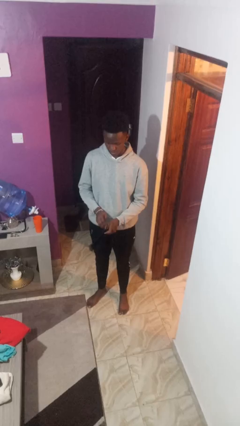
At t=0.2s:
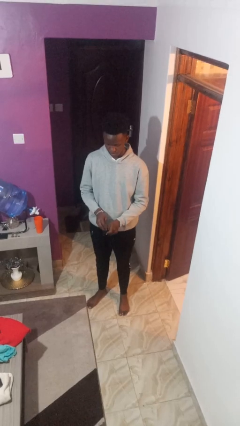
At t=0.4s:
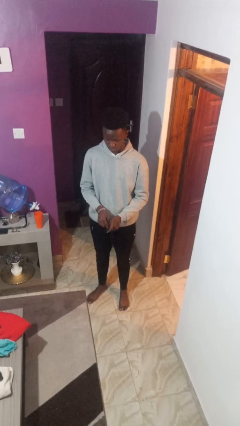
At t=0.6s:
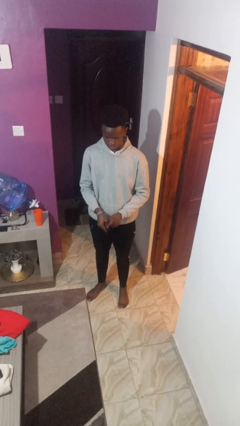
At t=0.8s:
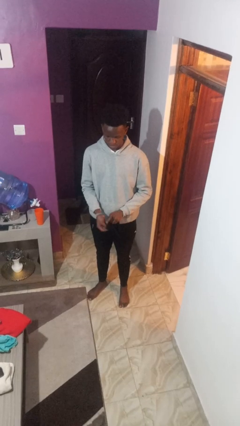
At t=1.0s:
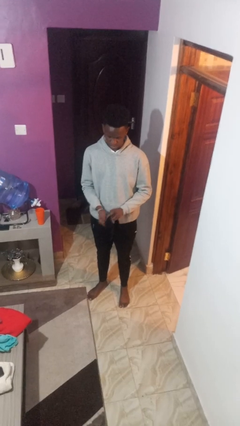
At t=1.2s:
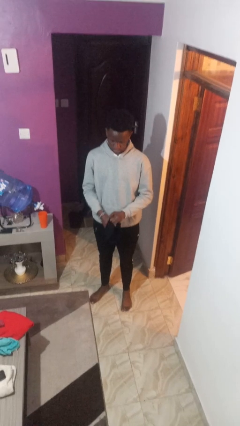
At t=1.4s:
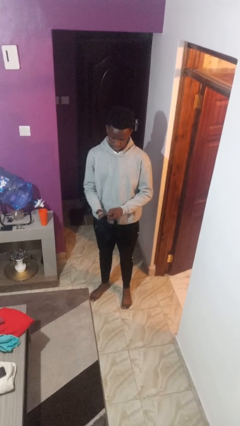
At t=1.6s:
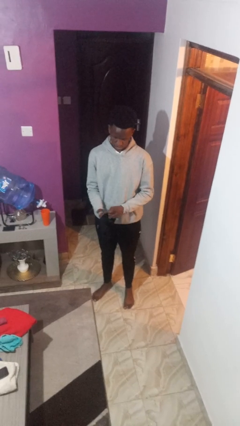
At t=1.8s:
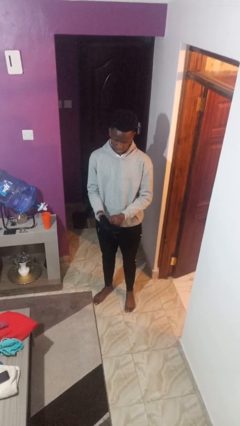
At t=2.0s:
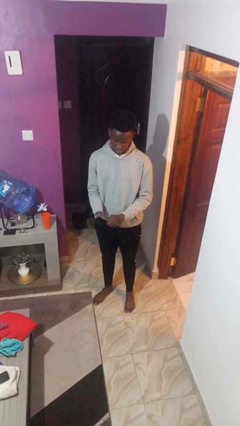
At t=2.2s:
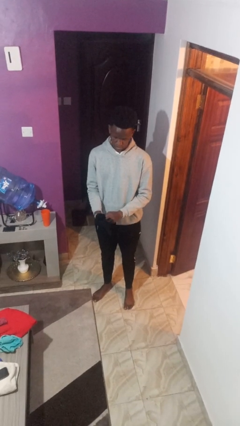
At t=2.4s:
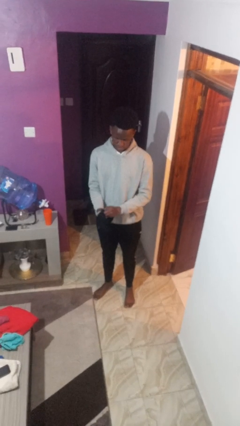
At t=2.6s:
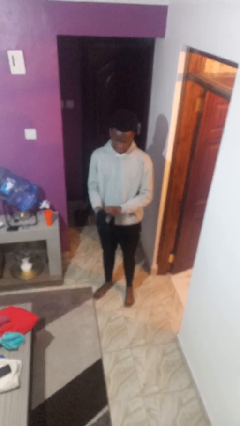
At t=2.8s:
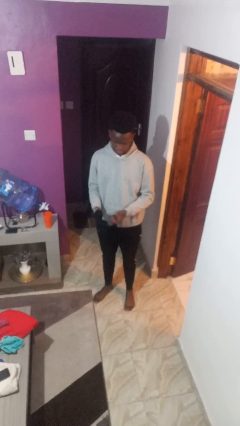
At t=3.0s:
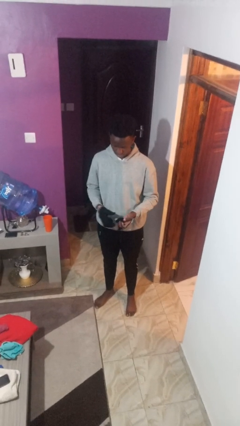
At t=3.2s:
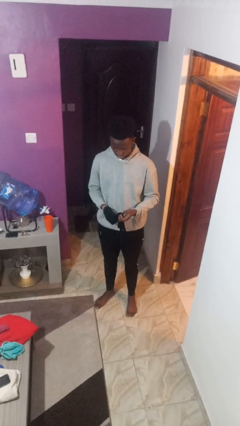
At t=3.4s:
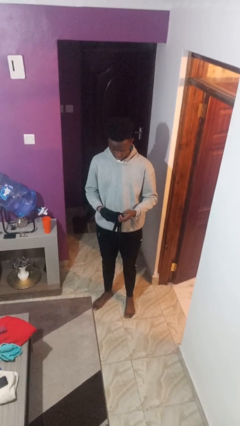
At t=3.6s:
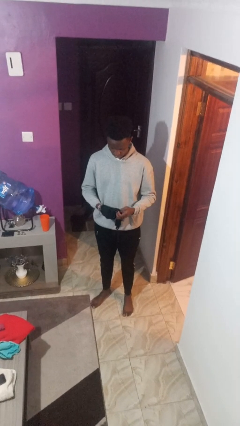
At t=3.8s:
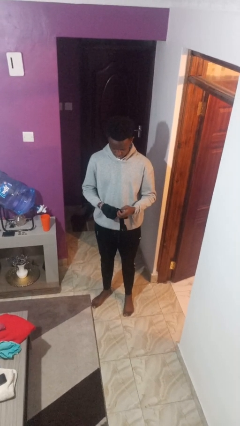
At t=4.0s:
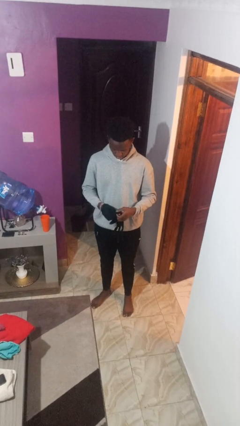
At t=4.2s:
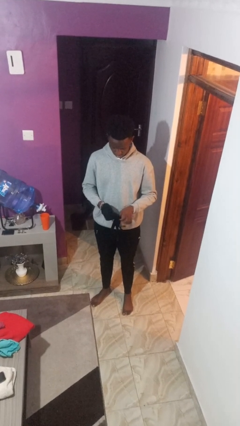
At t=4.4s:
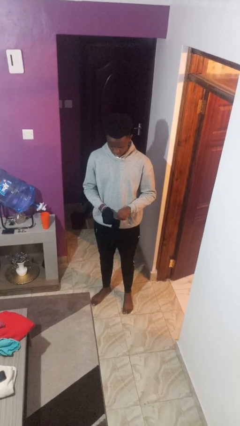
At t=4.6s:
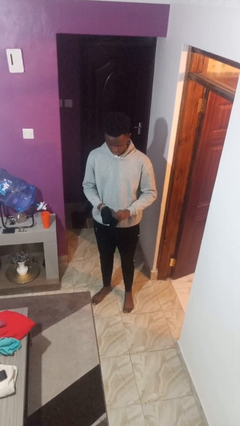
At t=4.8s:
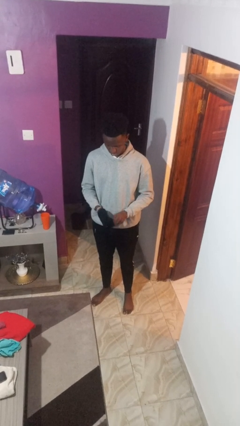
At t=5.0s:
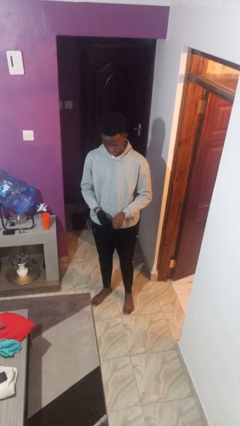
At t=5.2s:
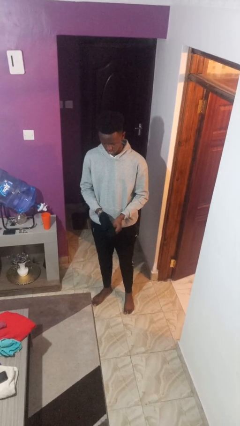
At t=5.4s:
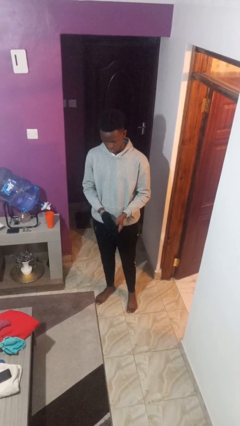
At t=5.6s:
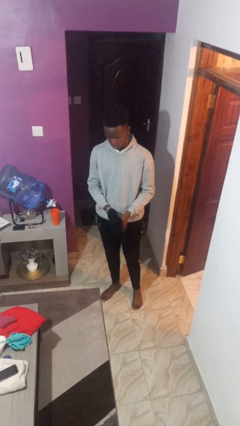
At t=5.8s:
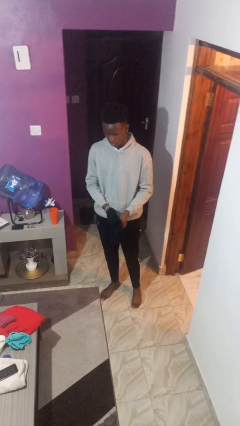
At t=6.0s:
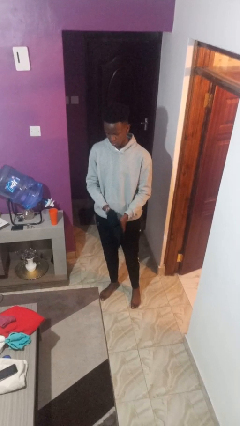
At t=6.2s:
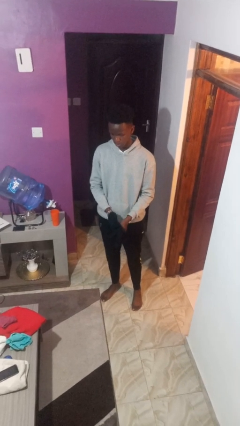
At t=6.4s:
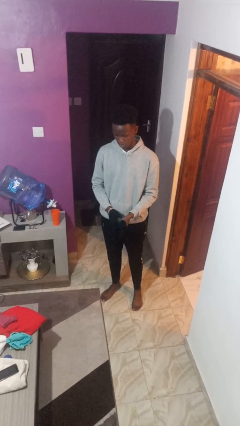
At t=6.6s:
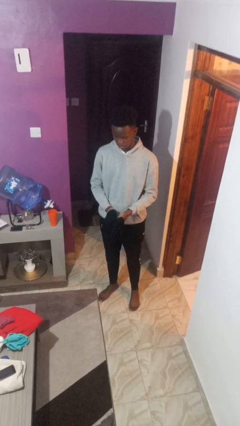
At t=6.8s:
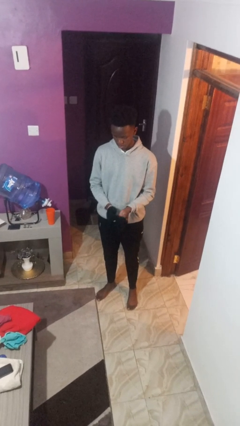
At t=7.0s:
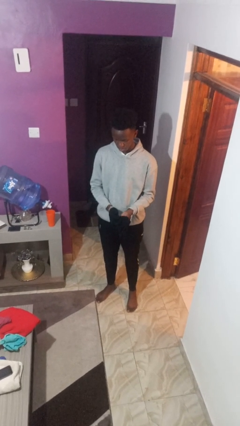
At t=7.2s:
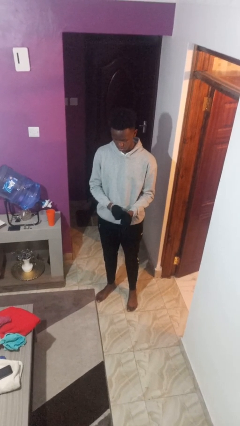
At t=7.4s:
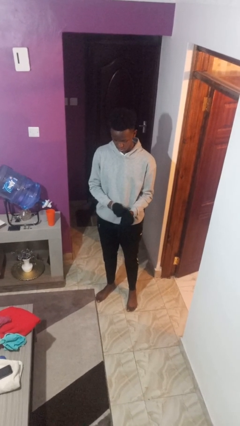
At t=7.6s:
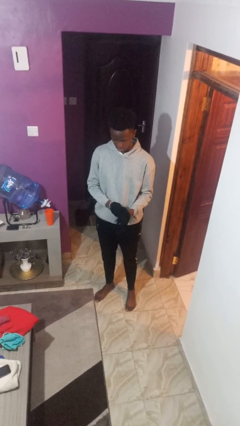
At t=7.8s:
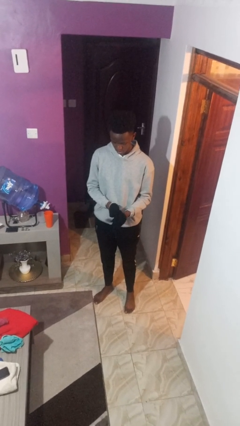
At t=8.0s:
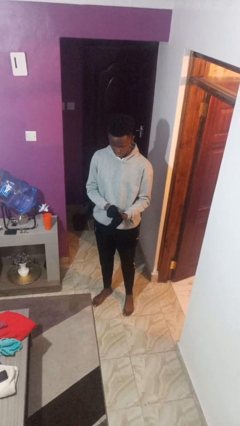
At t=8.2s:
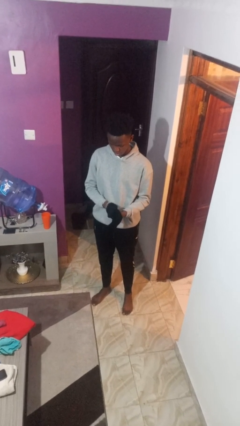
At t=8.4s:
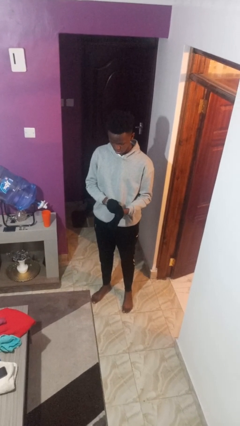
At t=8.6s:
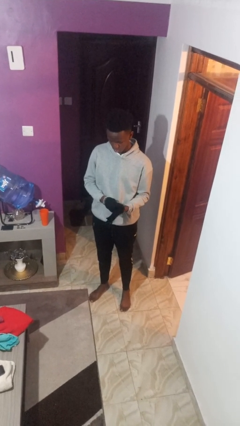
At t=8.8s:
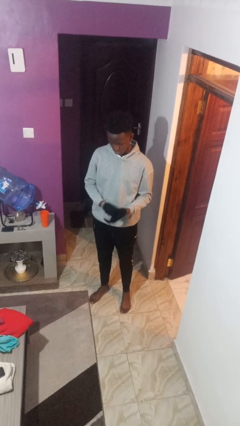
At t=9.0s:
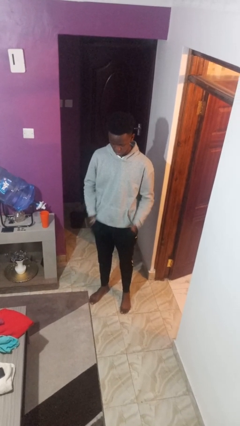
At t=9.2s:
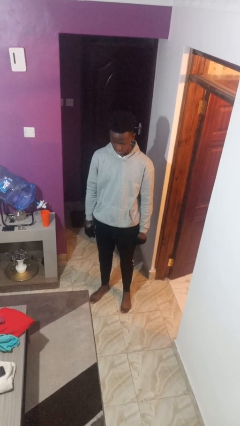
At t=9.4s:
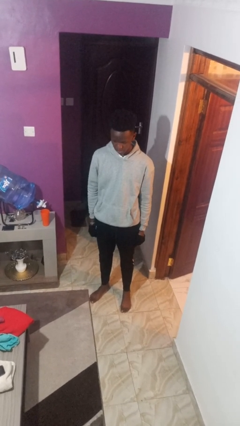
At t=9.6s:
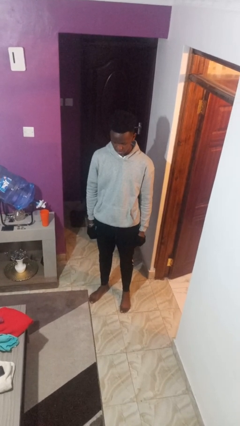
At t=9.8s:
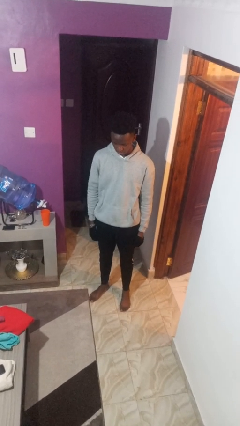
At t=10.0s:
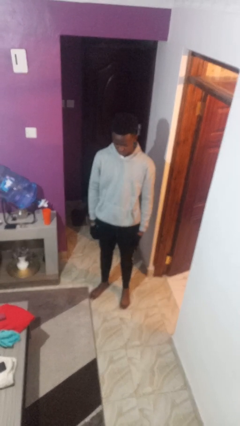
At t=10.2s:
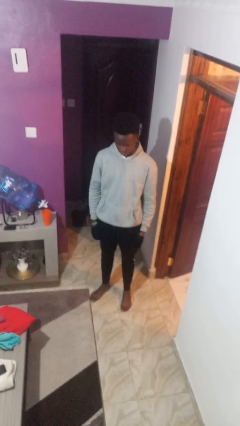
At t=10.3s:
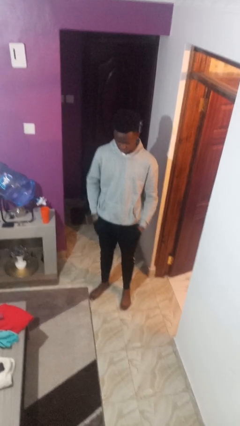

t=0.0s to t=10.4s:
person puts on gloves

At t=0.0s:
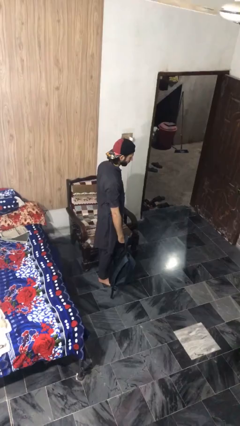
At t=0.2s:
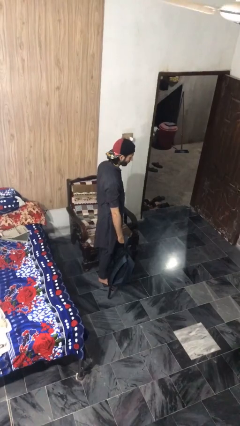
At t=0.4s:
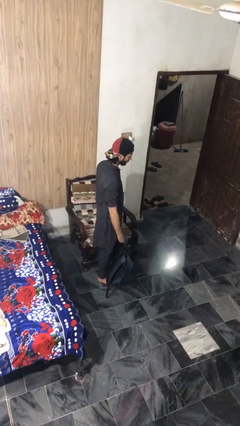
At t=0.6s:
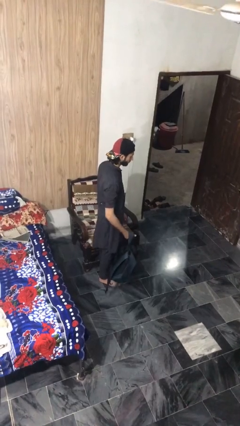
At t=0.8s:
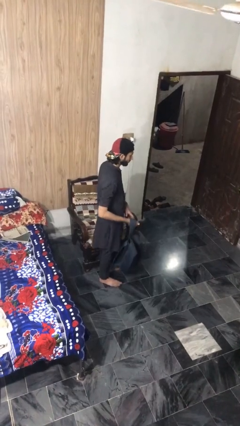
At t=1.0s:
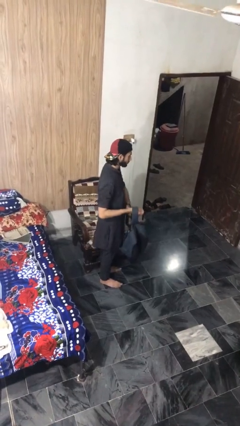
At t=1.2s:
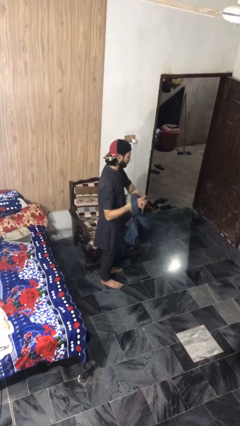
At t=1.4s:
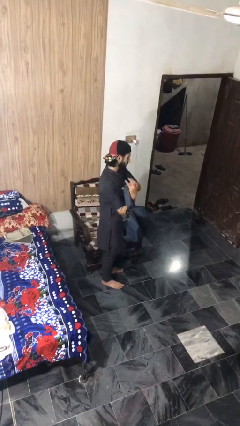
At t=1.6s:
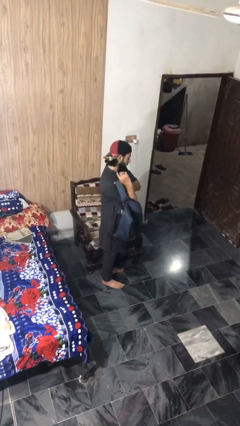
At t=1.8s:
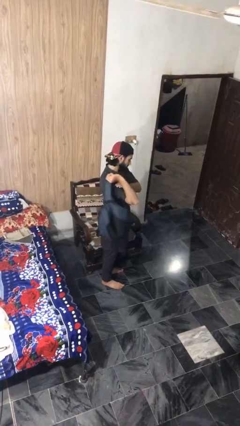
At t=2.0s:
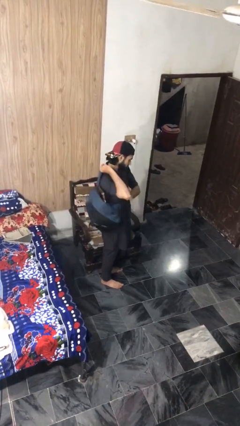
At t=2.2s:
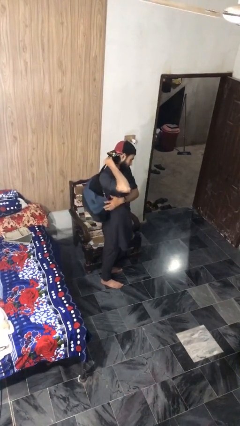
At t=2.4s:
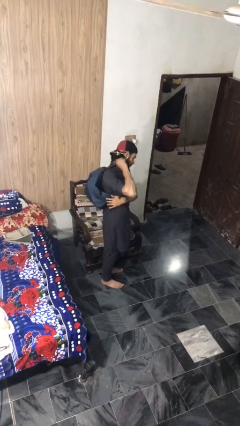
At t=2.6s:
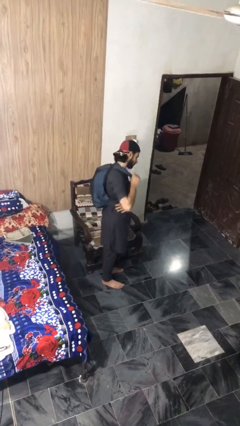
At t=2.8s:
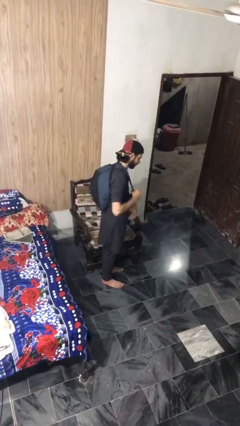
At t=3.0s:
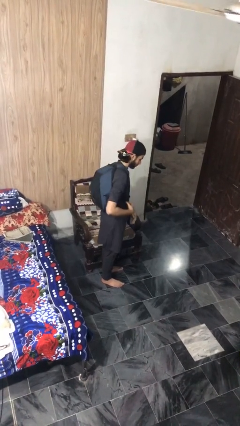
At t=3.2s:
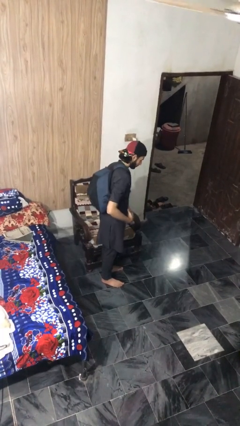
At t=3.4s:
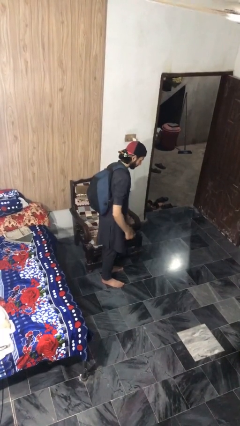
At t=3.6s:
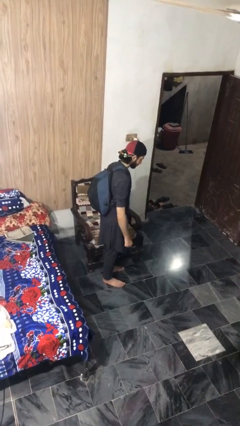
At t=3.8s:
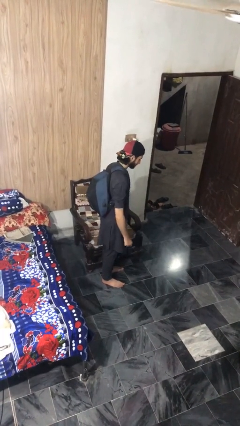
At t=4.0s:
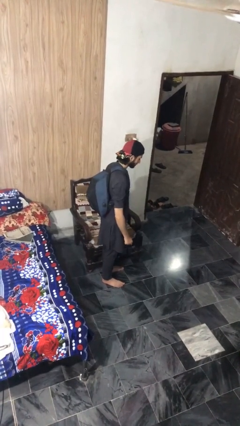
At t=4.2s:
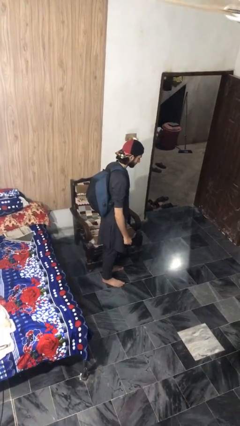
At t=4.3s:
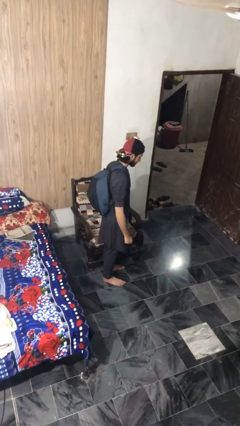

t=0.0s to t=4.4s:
person puts on backpack

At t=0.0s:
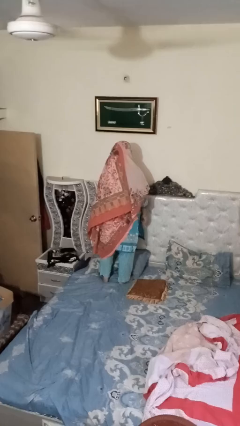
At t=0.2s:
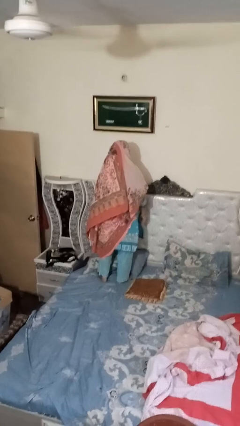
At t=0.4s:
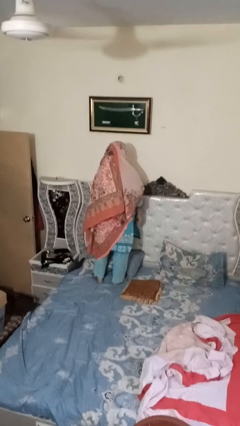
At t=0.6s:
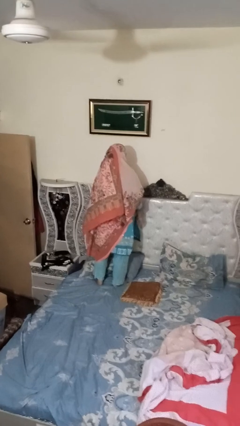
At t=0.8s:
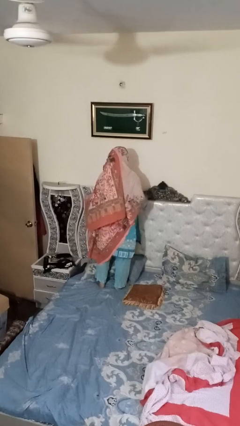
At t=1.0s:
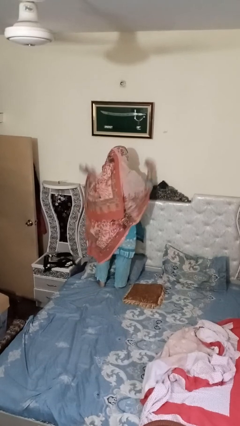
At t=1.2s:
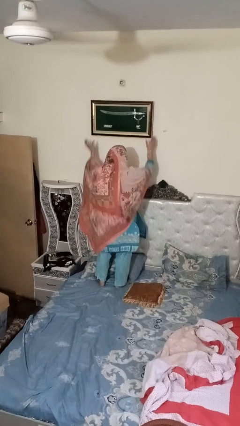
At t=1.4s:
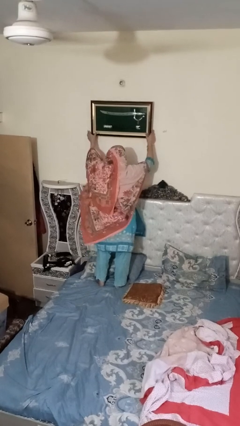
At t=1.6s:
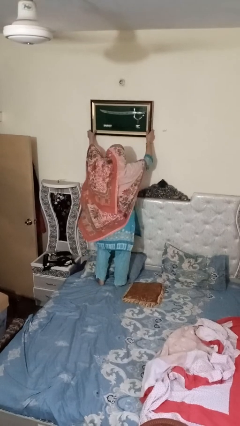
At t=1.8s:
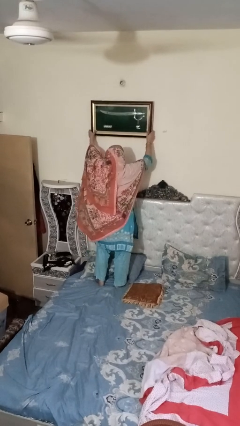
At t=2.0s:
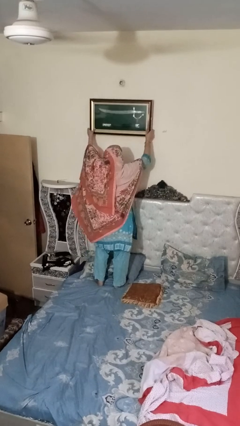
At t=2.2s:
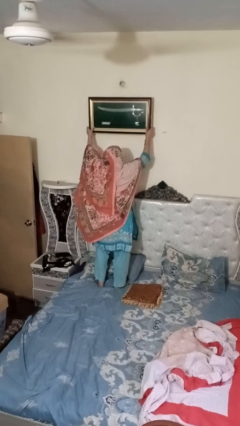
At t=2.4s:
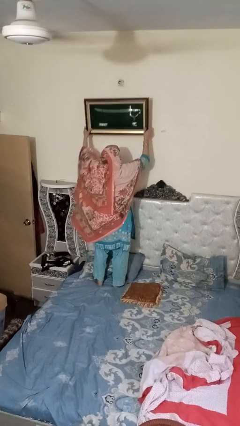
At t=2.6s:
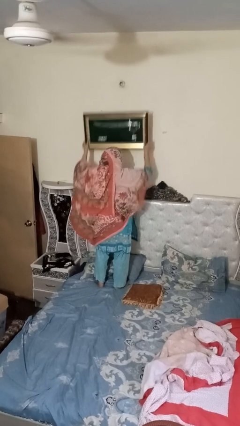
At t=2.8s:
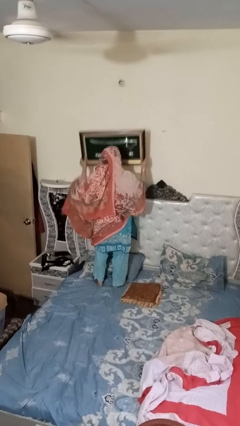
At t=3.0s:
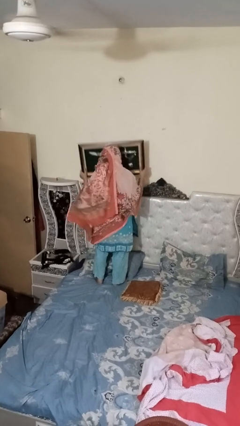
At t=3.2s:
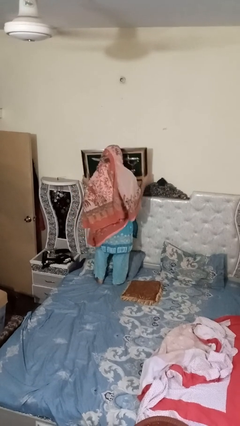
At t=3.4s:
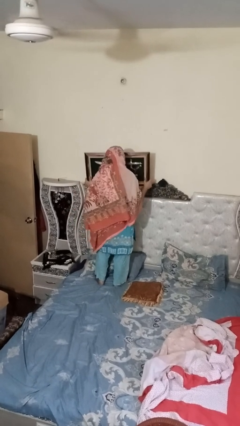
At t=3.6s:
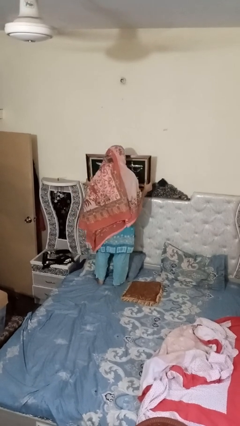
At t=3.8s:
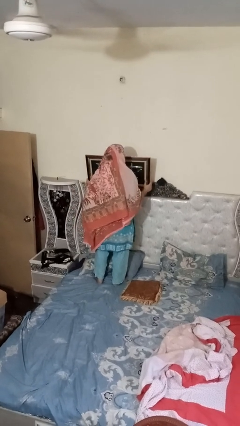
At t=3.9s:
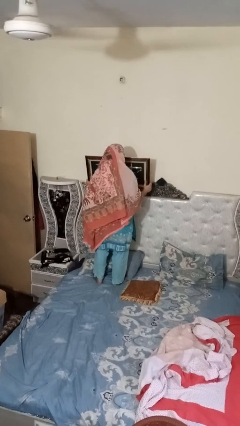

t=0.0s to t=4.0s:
person puts up picture frame
